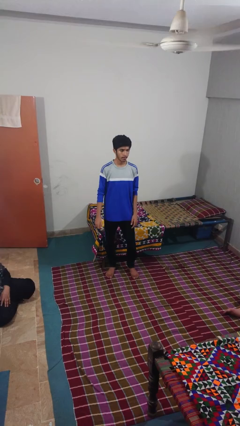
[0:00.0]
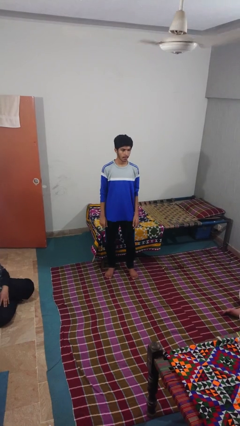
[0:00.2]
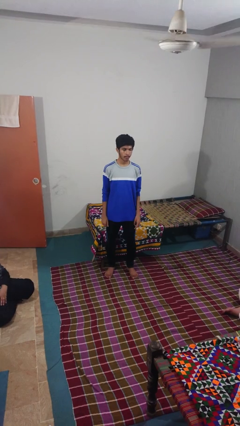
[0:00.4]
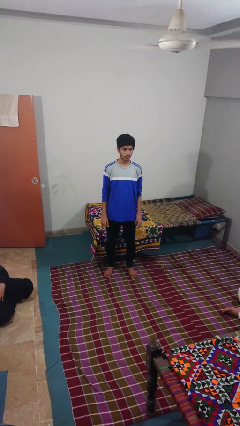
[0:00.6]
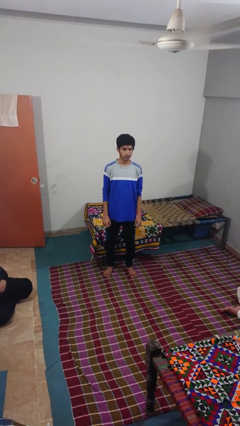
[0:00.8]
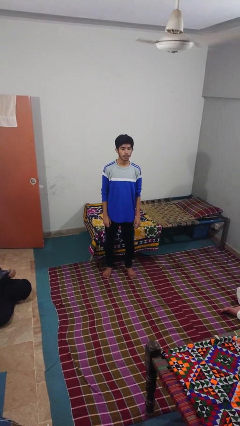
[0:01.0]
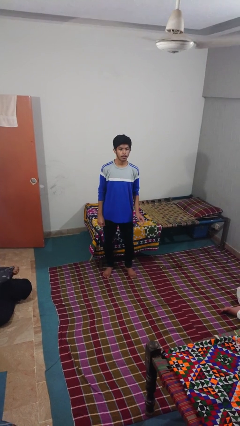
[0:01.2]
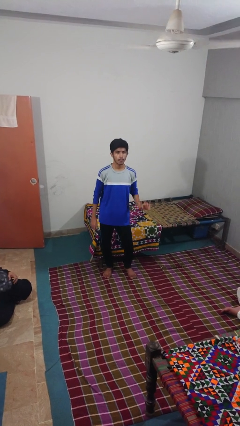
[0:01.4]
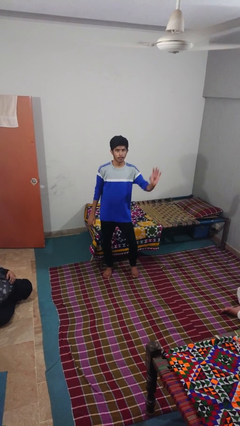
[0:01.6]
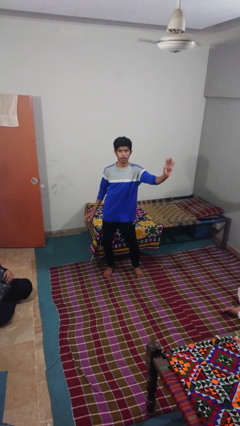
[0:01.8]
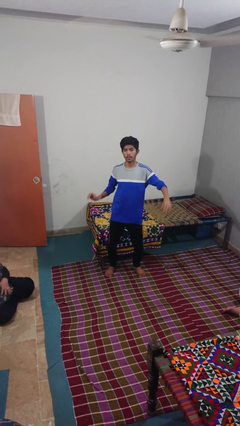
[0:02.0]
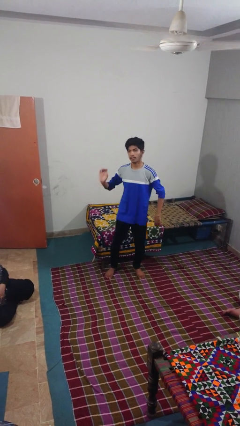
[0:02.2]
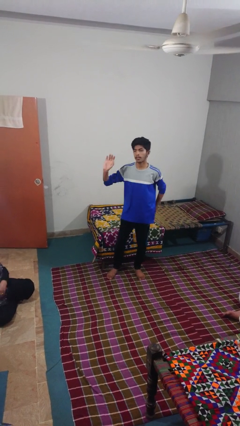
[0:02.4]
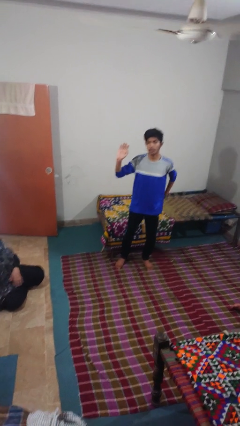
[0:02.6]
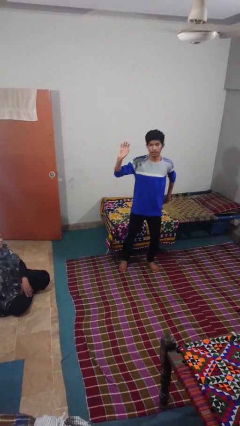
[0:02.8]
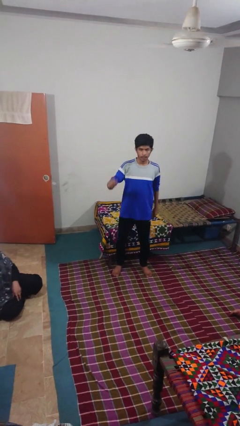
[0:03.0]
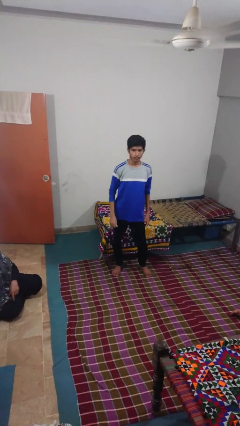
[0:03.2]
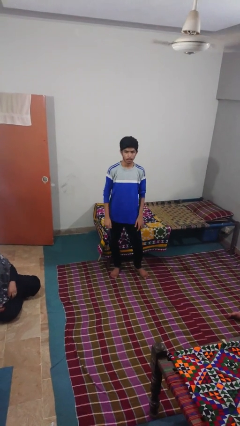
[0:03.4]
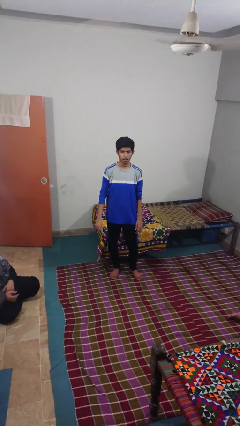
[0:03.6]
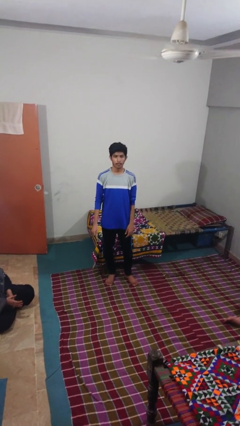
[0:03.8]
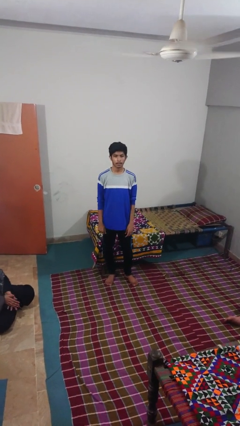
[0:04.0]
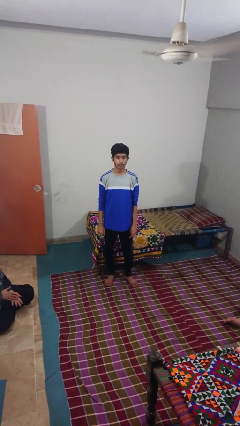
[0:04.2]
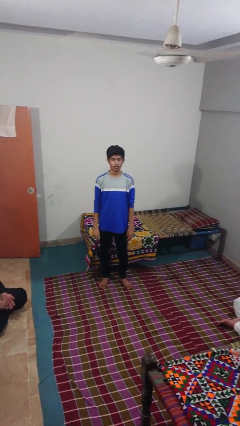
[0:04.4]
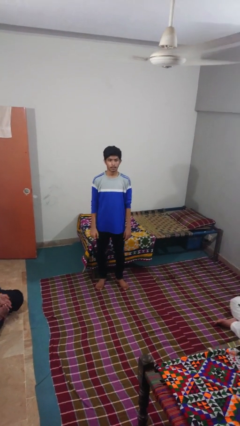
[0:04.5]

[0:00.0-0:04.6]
person dances in place

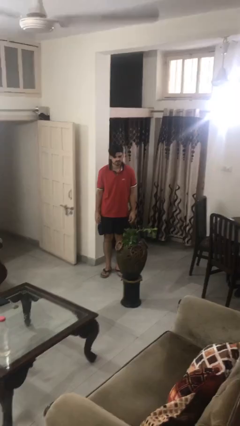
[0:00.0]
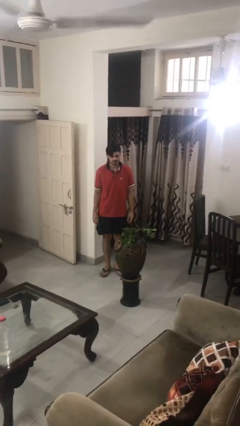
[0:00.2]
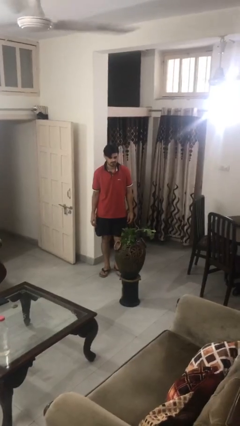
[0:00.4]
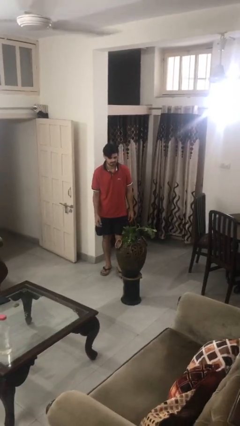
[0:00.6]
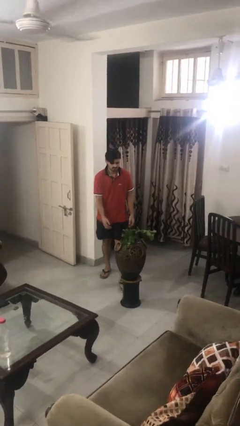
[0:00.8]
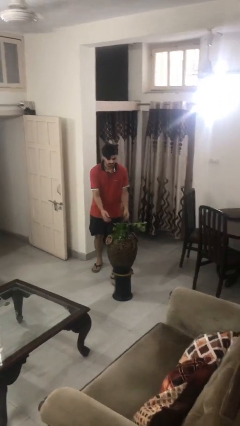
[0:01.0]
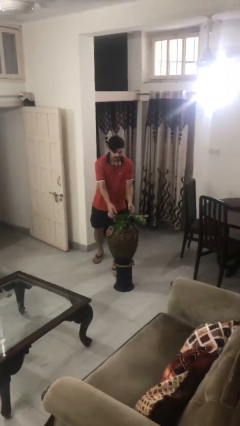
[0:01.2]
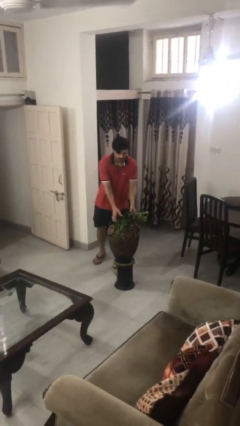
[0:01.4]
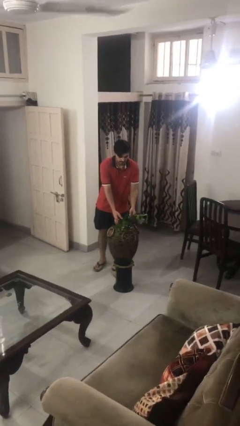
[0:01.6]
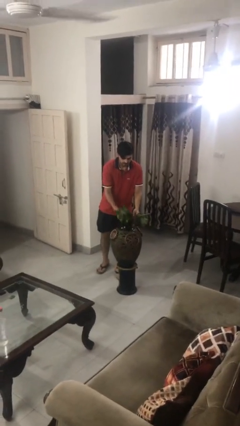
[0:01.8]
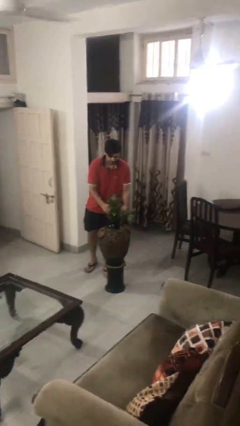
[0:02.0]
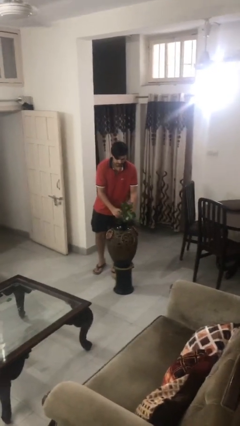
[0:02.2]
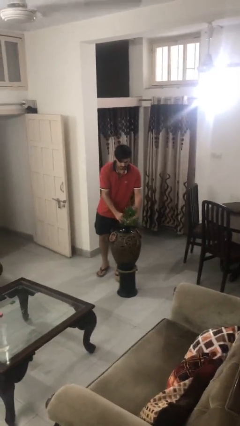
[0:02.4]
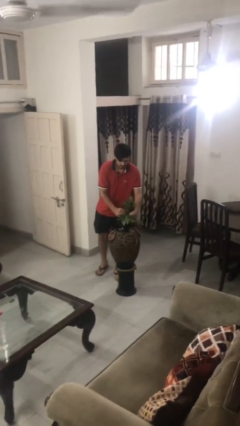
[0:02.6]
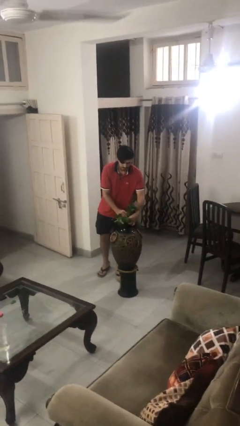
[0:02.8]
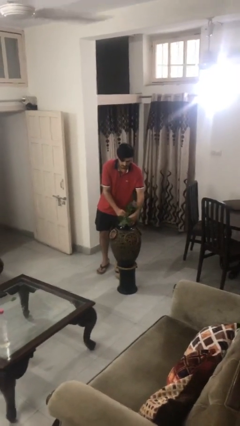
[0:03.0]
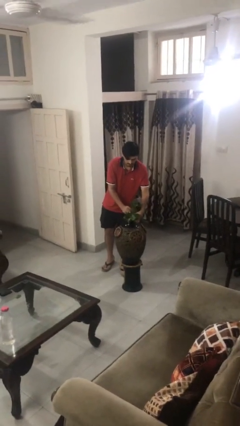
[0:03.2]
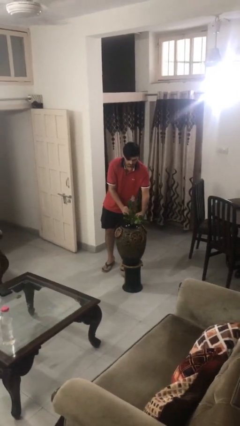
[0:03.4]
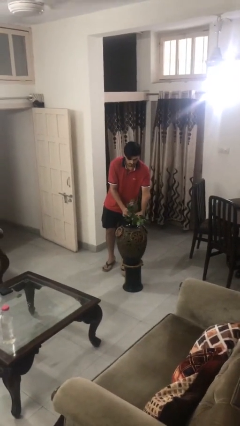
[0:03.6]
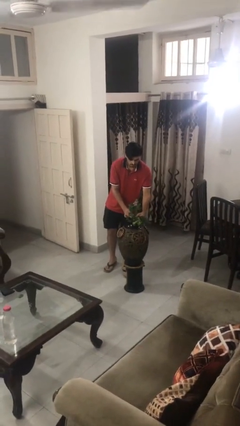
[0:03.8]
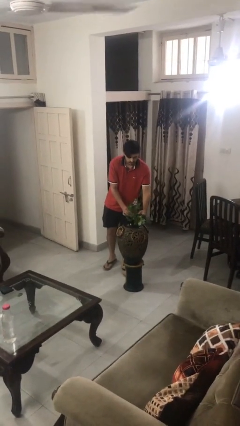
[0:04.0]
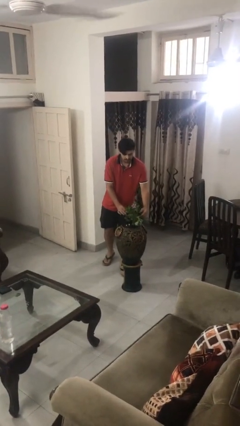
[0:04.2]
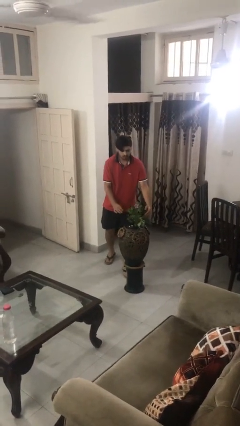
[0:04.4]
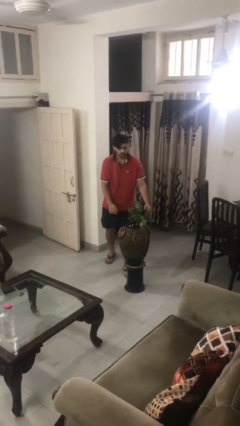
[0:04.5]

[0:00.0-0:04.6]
person arranges flowers in vase

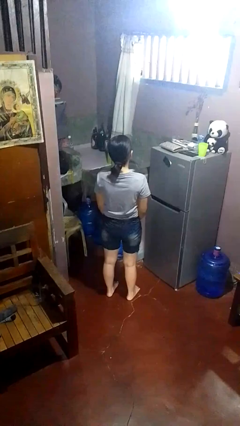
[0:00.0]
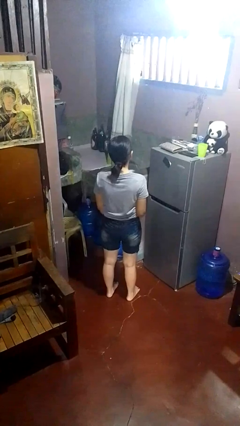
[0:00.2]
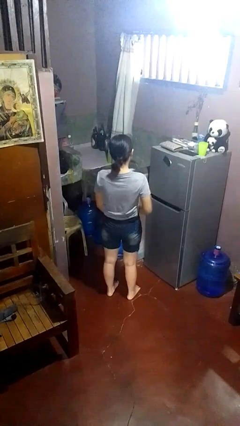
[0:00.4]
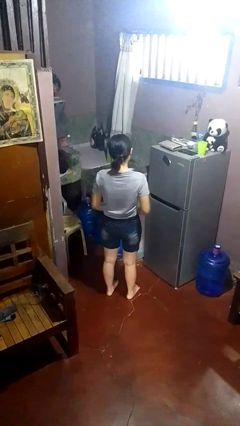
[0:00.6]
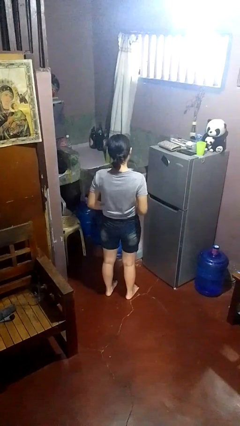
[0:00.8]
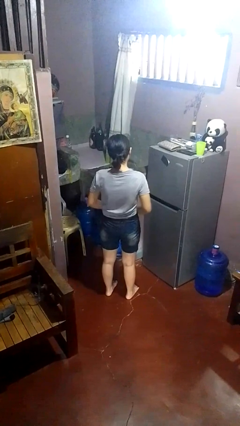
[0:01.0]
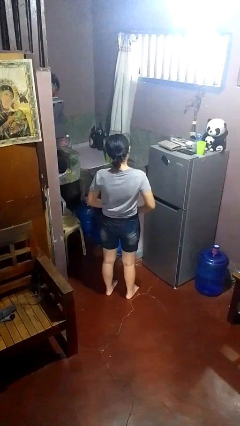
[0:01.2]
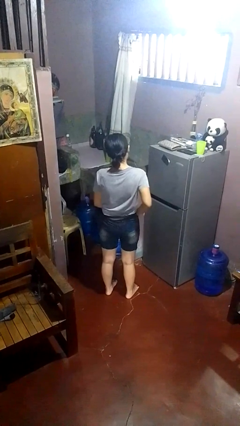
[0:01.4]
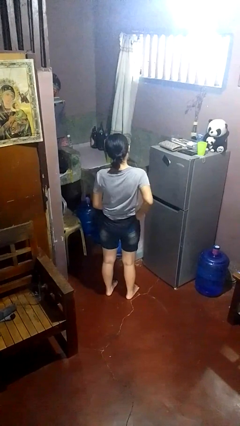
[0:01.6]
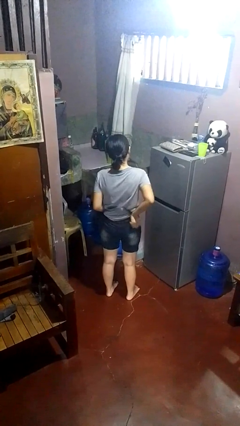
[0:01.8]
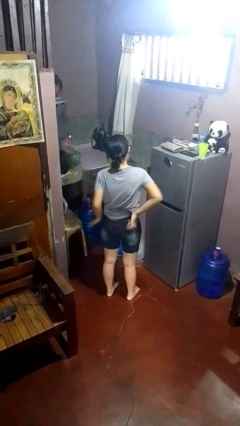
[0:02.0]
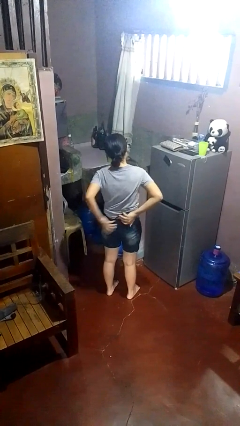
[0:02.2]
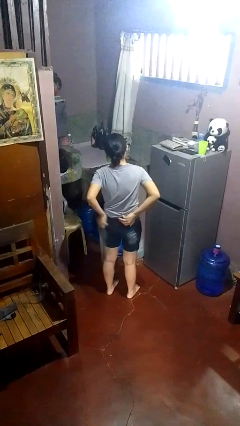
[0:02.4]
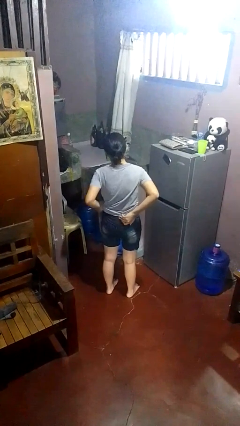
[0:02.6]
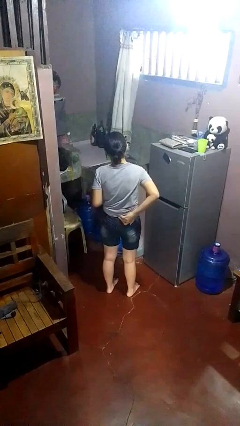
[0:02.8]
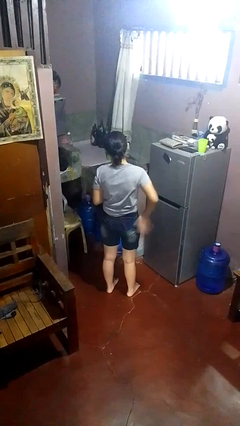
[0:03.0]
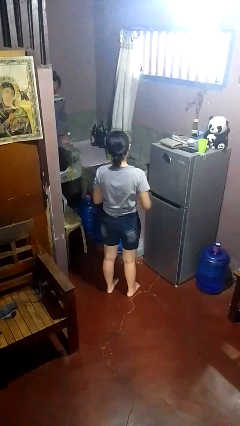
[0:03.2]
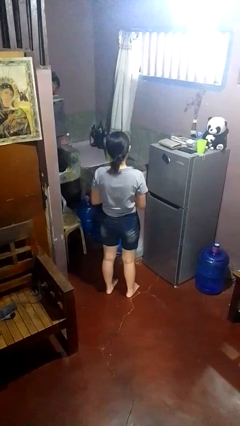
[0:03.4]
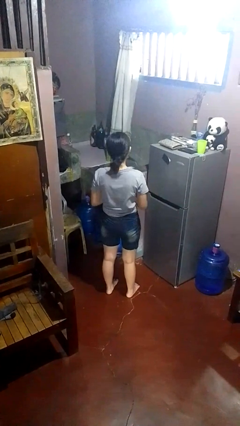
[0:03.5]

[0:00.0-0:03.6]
person takes off belt

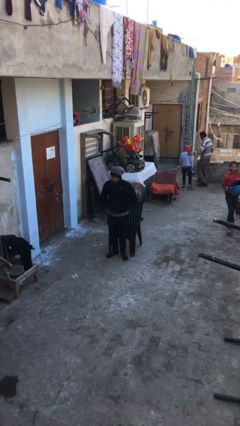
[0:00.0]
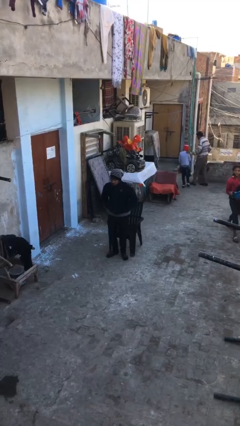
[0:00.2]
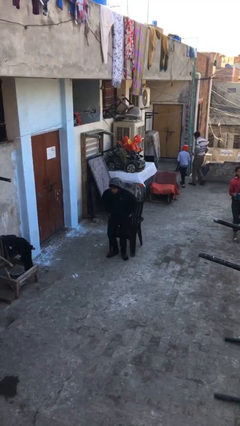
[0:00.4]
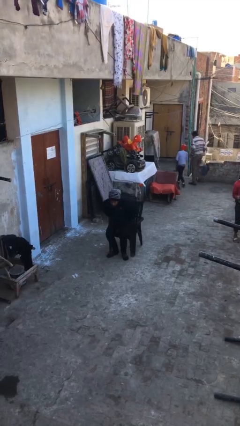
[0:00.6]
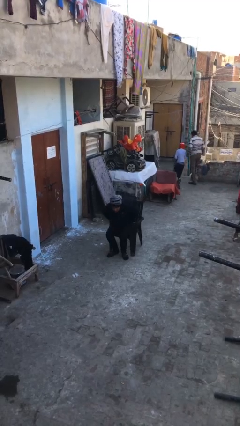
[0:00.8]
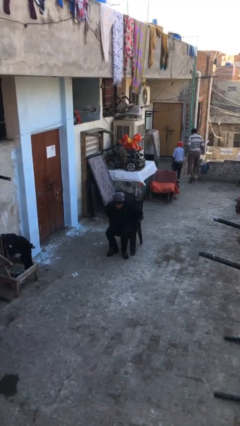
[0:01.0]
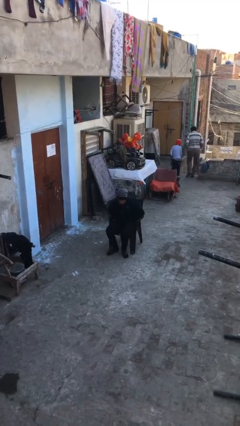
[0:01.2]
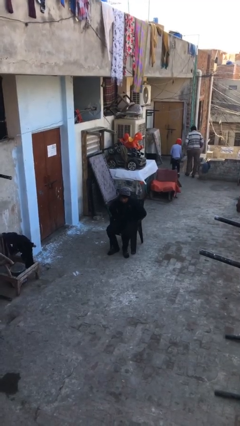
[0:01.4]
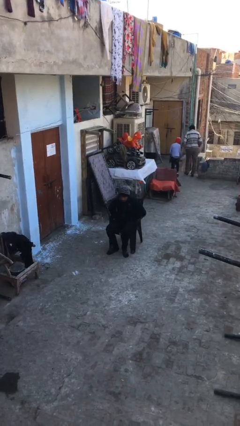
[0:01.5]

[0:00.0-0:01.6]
person sits down

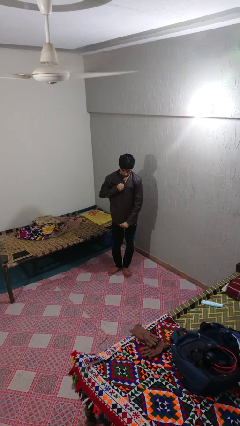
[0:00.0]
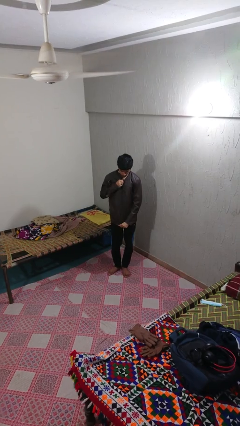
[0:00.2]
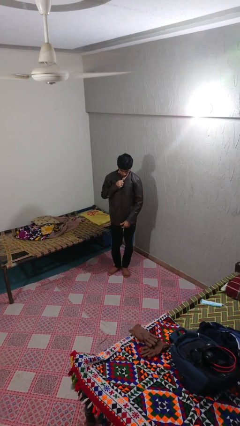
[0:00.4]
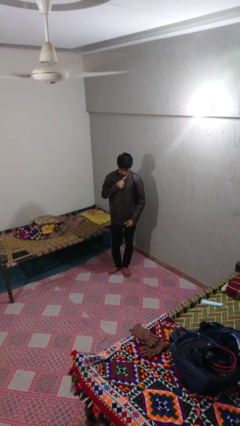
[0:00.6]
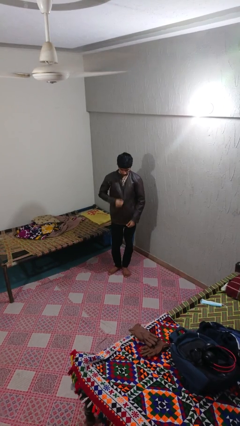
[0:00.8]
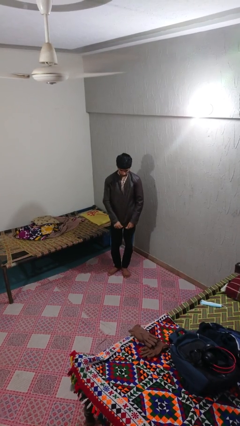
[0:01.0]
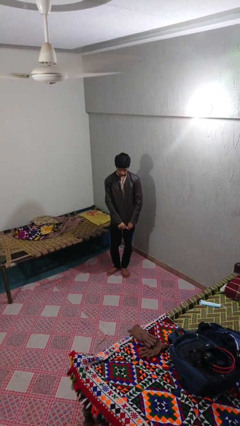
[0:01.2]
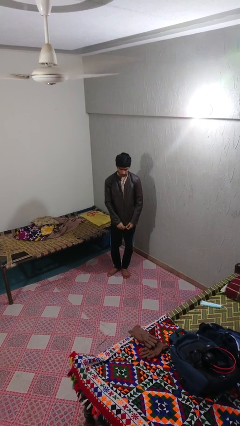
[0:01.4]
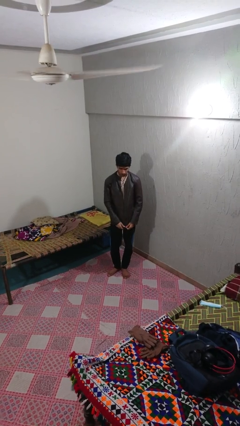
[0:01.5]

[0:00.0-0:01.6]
person unzips jacket

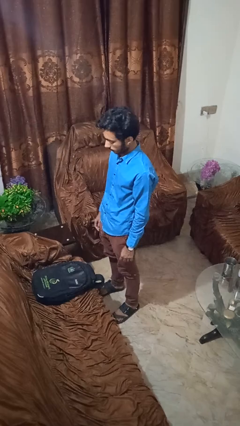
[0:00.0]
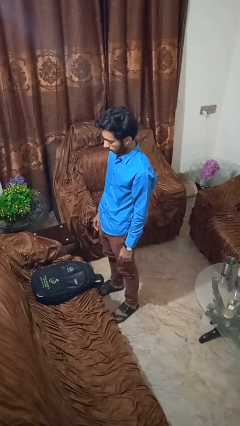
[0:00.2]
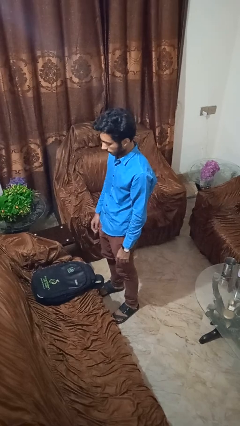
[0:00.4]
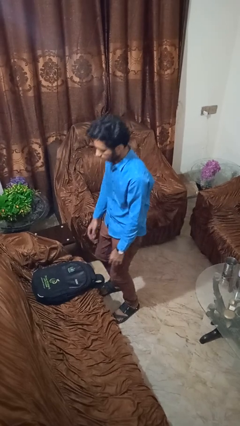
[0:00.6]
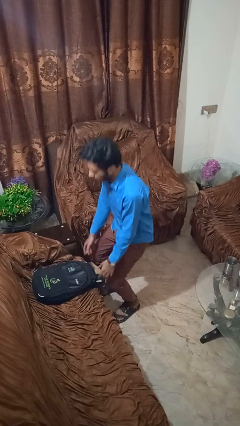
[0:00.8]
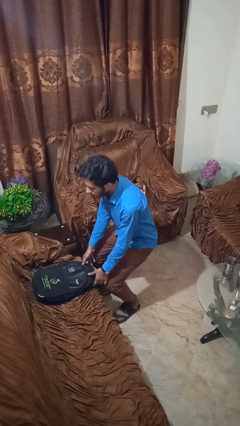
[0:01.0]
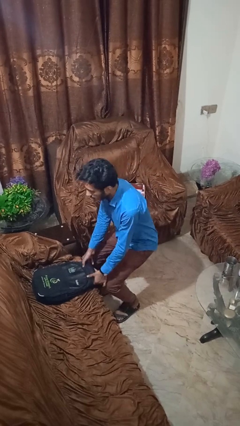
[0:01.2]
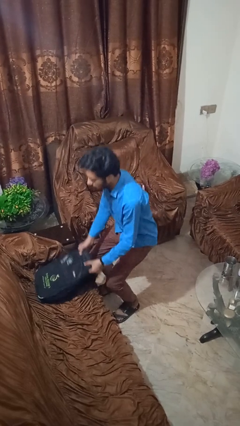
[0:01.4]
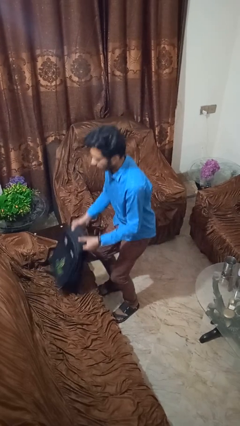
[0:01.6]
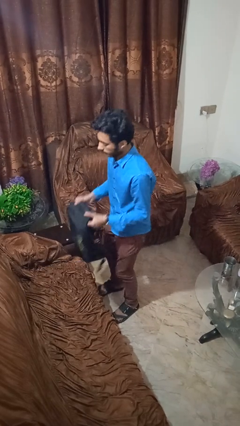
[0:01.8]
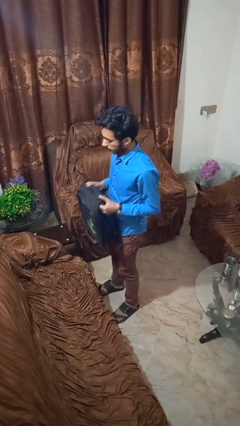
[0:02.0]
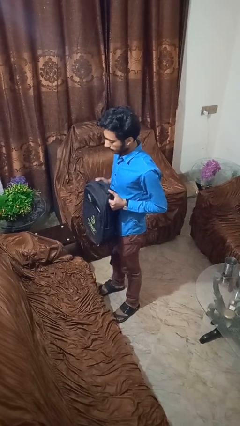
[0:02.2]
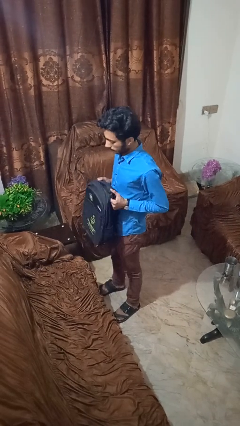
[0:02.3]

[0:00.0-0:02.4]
person picks up object from couch
